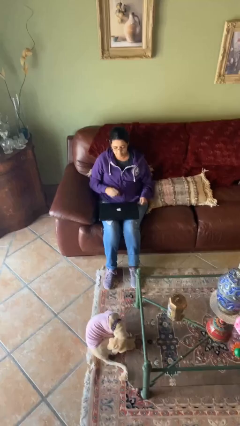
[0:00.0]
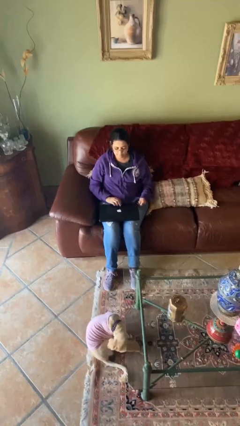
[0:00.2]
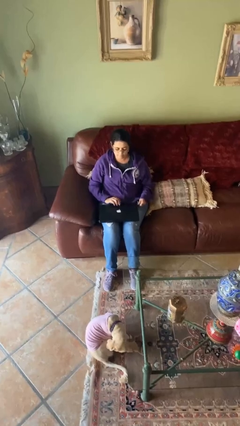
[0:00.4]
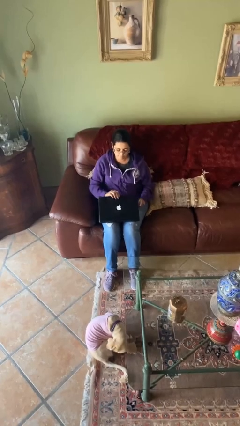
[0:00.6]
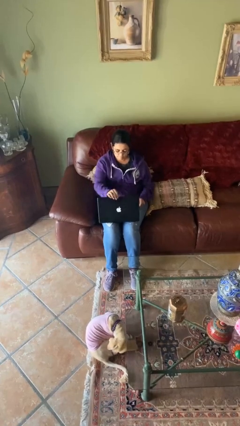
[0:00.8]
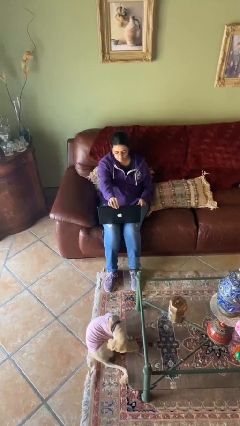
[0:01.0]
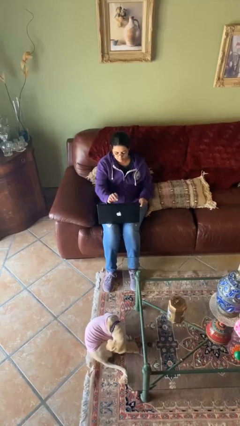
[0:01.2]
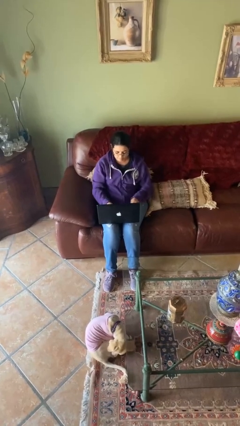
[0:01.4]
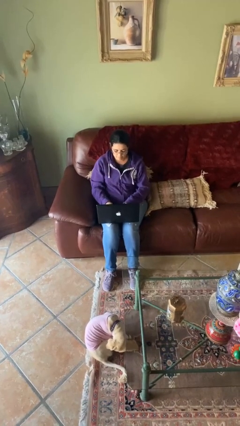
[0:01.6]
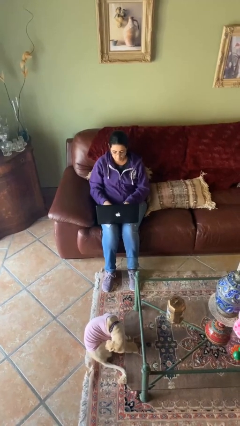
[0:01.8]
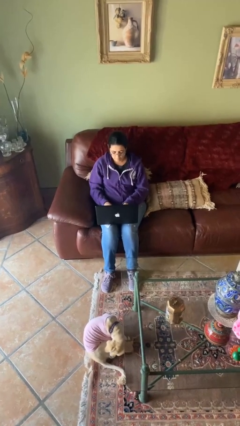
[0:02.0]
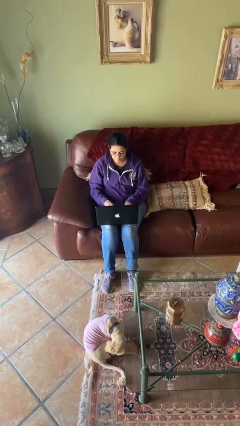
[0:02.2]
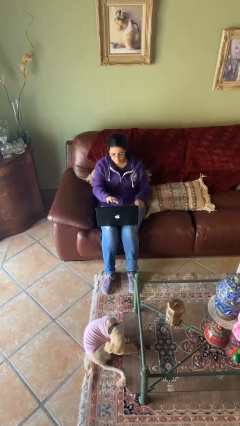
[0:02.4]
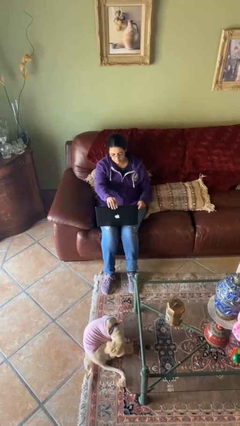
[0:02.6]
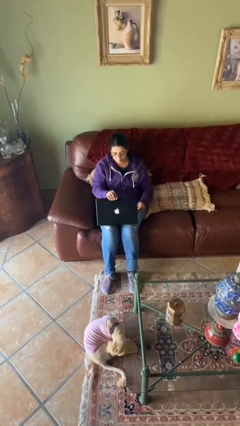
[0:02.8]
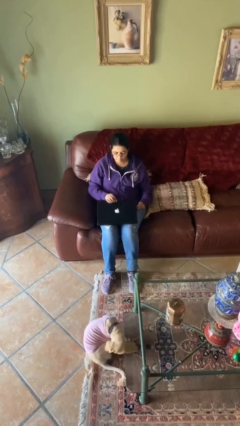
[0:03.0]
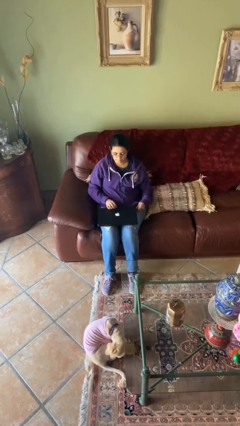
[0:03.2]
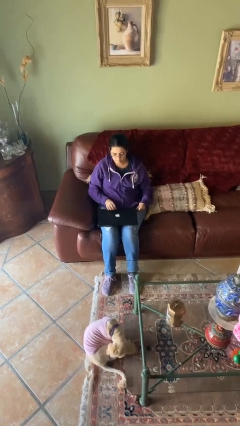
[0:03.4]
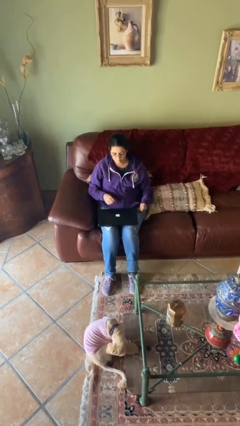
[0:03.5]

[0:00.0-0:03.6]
person interacts with laptop

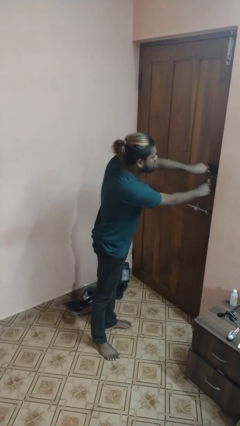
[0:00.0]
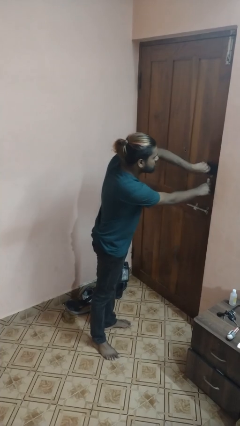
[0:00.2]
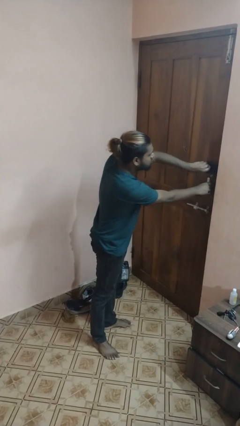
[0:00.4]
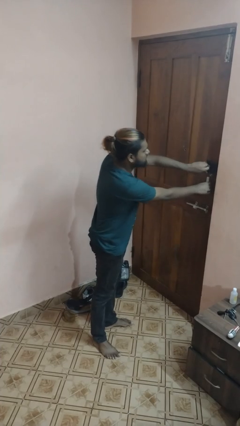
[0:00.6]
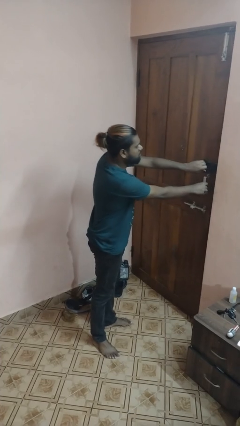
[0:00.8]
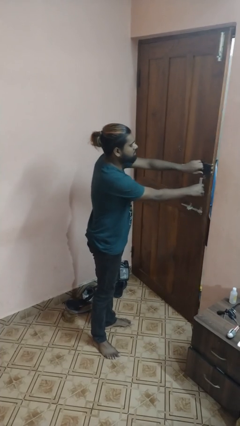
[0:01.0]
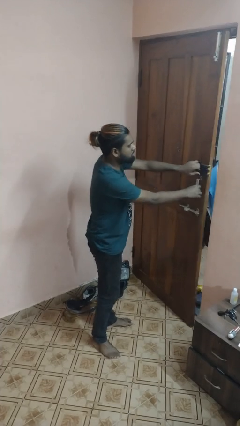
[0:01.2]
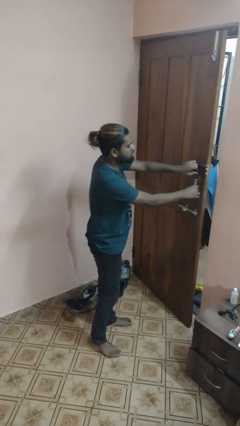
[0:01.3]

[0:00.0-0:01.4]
person unlocks door with keys

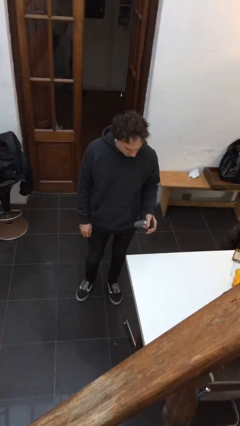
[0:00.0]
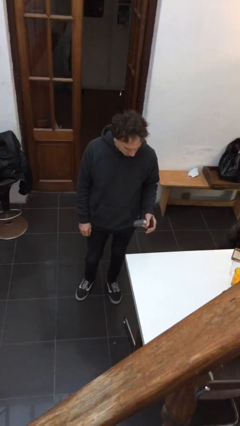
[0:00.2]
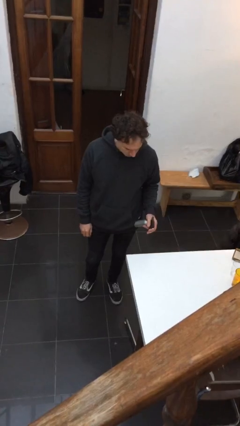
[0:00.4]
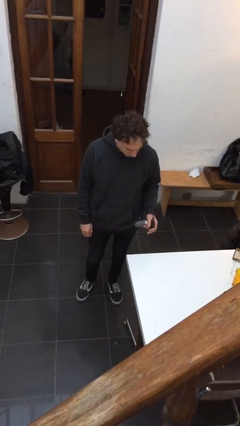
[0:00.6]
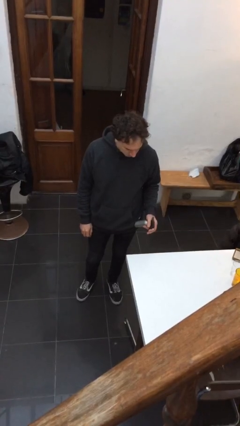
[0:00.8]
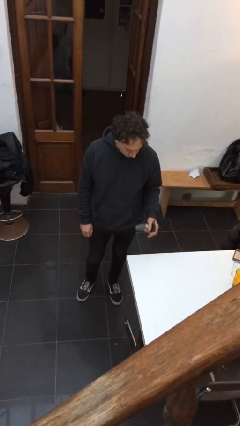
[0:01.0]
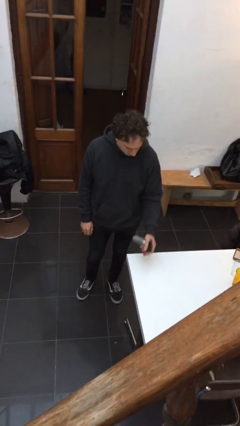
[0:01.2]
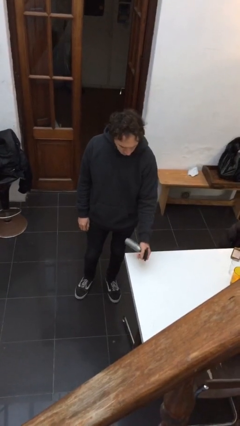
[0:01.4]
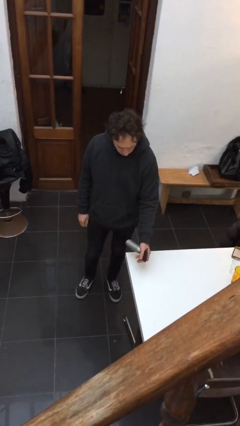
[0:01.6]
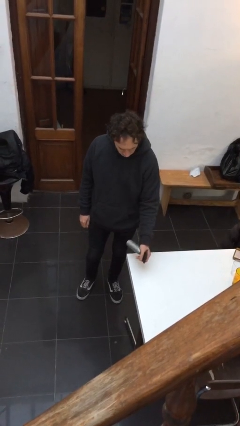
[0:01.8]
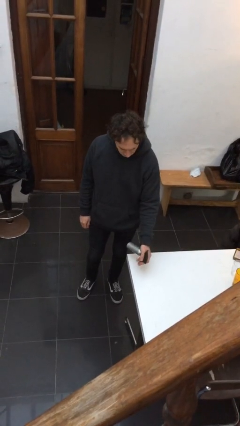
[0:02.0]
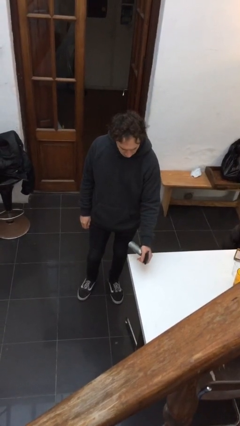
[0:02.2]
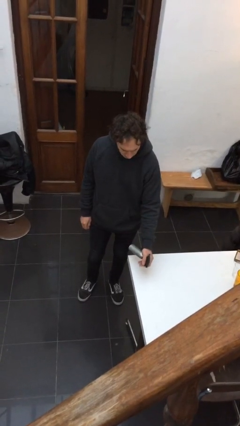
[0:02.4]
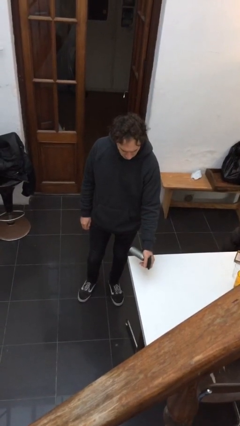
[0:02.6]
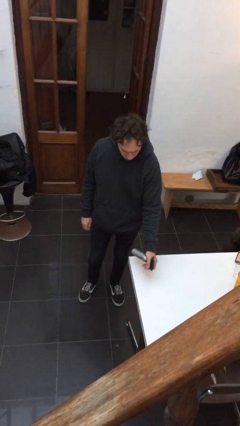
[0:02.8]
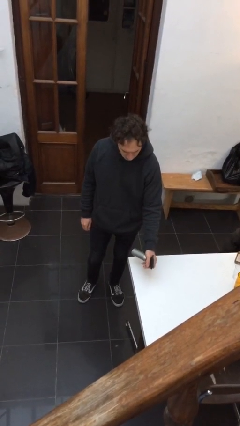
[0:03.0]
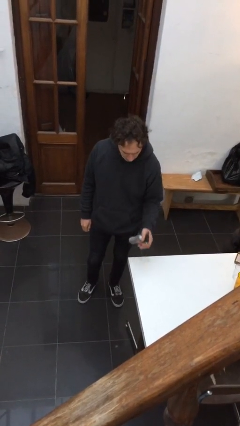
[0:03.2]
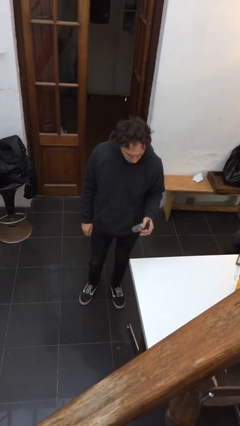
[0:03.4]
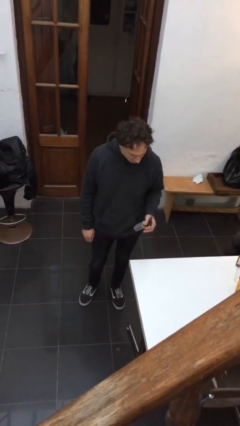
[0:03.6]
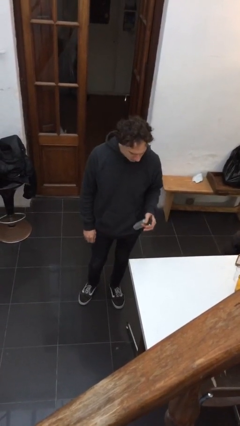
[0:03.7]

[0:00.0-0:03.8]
person sprays from bottle

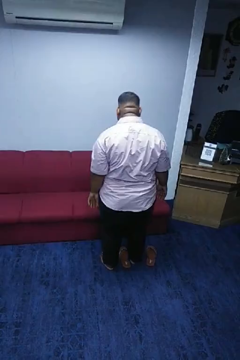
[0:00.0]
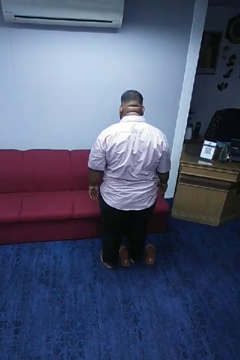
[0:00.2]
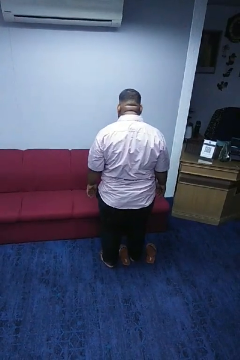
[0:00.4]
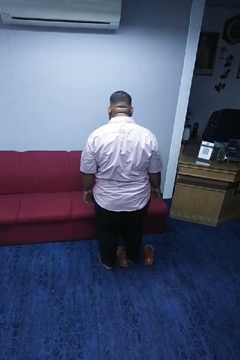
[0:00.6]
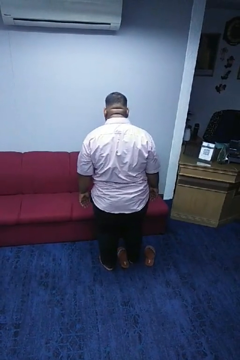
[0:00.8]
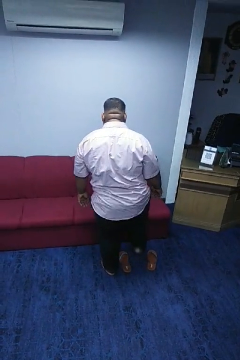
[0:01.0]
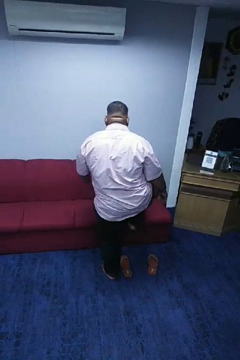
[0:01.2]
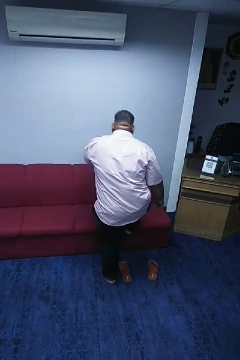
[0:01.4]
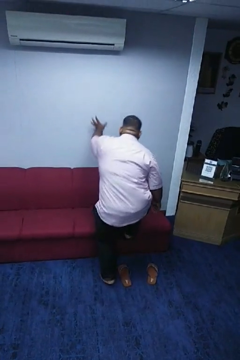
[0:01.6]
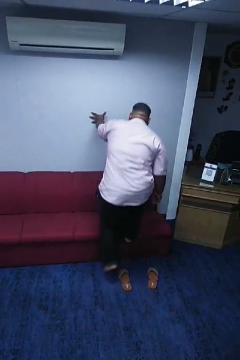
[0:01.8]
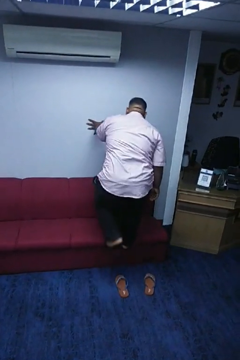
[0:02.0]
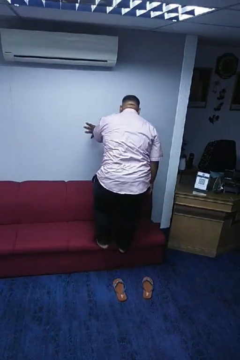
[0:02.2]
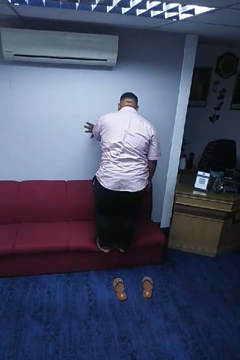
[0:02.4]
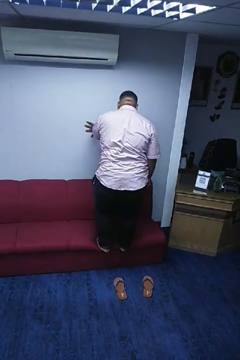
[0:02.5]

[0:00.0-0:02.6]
person climbs on couch

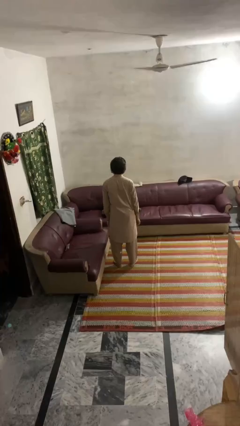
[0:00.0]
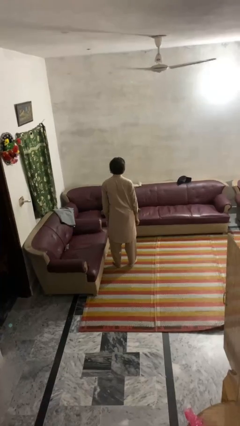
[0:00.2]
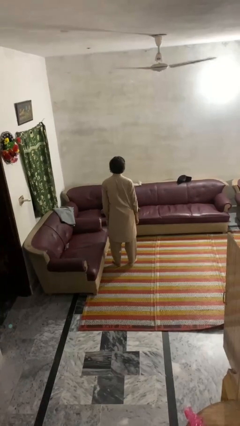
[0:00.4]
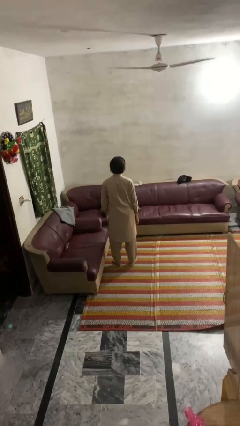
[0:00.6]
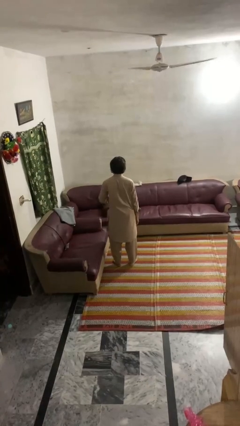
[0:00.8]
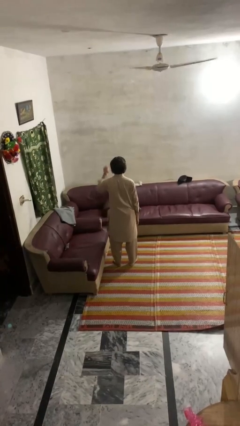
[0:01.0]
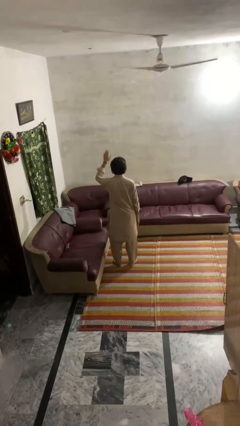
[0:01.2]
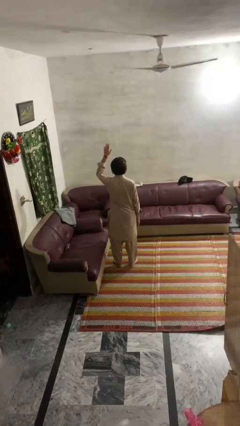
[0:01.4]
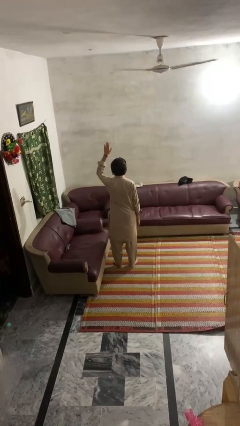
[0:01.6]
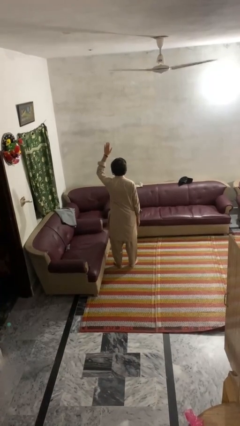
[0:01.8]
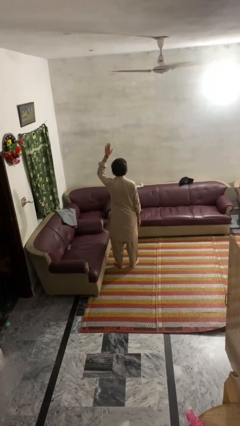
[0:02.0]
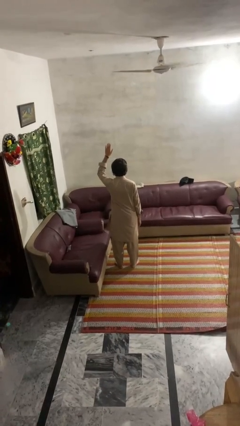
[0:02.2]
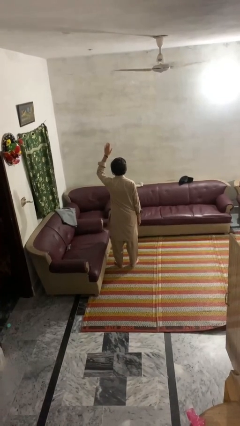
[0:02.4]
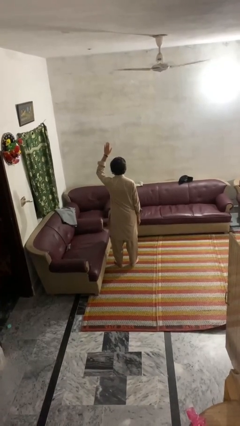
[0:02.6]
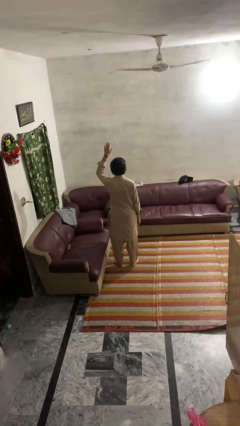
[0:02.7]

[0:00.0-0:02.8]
person gestures raise hand

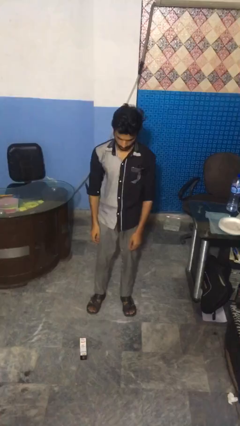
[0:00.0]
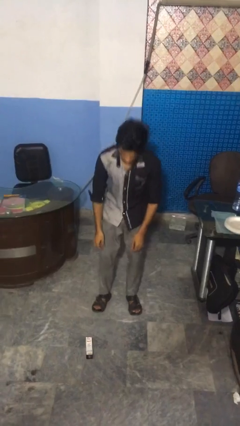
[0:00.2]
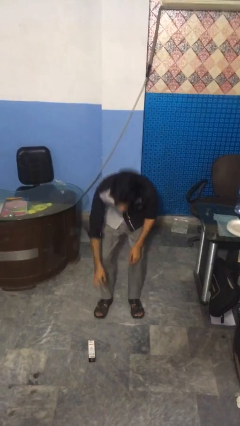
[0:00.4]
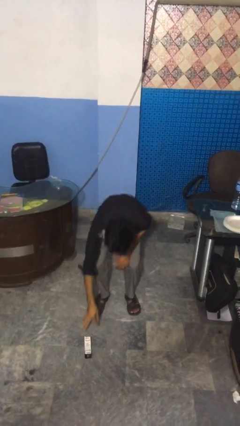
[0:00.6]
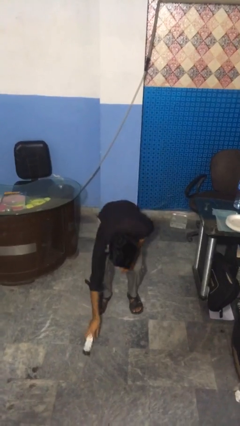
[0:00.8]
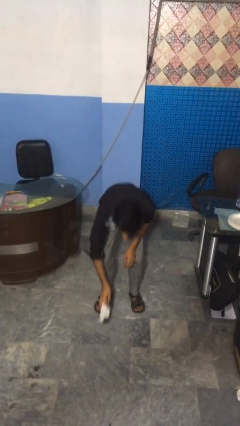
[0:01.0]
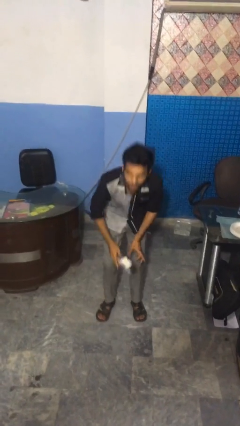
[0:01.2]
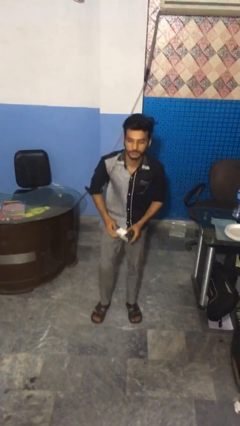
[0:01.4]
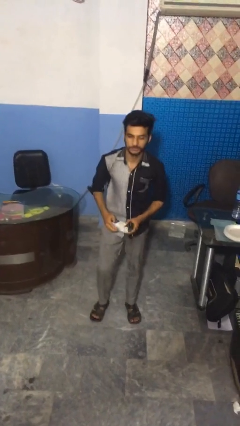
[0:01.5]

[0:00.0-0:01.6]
person picks up object from floor

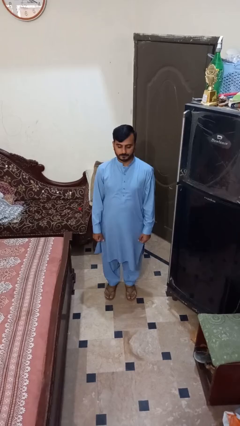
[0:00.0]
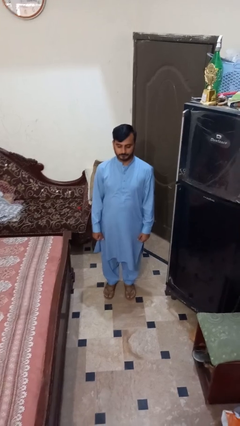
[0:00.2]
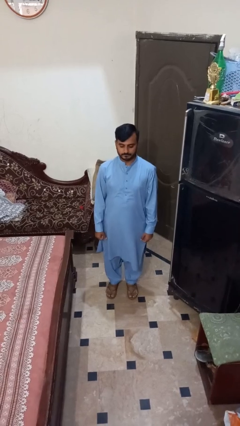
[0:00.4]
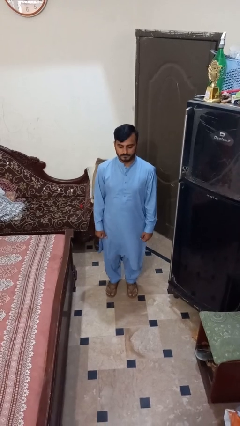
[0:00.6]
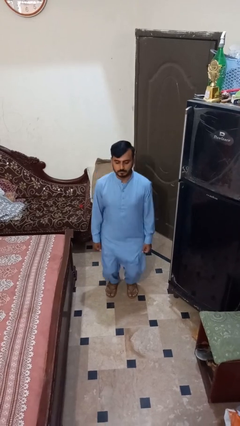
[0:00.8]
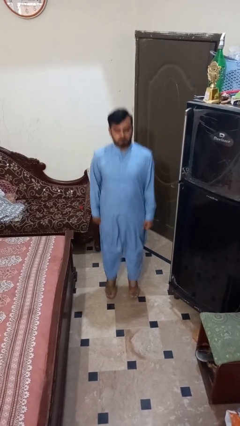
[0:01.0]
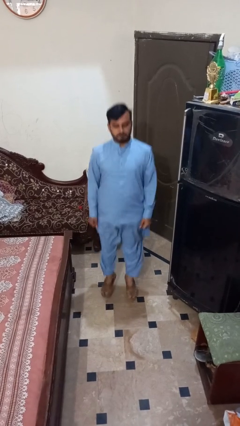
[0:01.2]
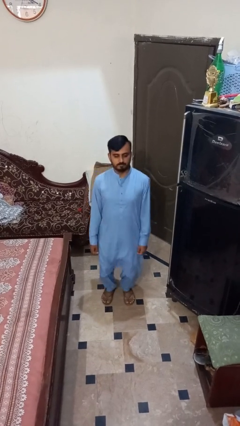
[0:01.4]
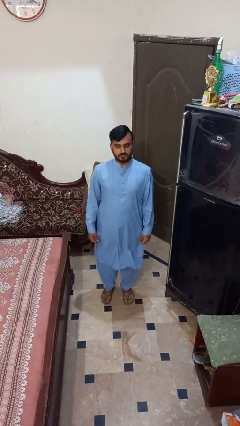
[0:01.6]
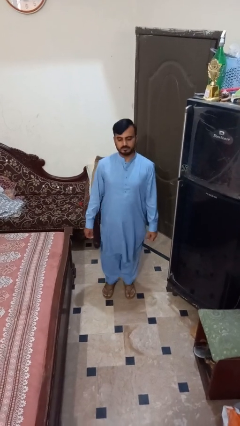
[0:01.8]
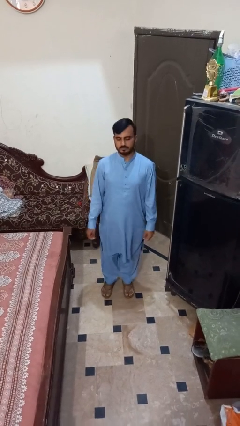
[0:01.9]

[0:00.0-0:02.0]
person jumps

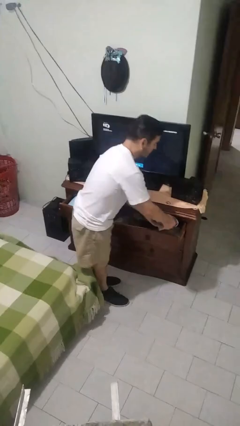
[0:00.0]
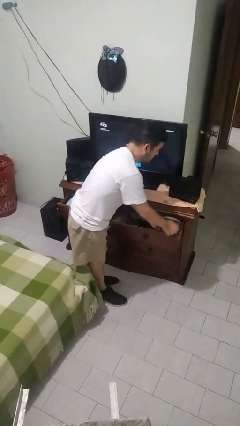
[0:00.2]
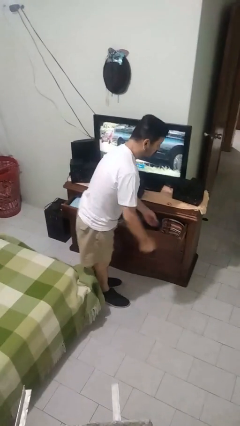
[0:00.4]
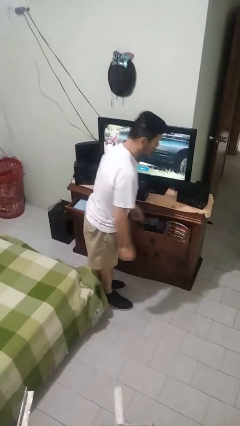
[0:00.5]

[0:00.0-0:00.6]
person puts clothes into dresser
